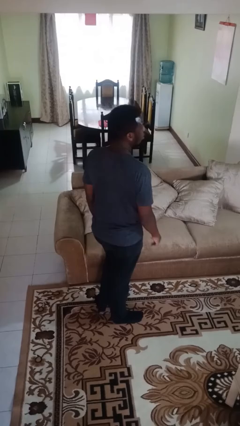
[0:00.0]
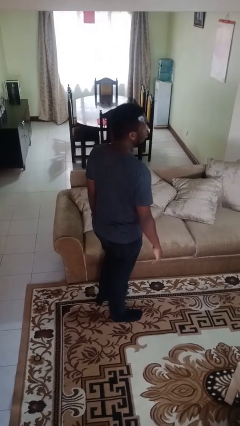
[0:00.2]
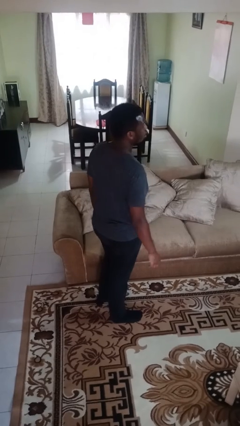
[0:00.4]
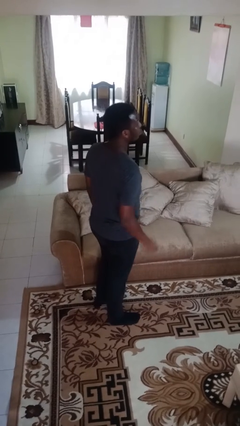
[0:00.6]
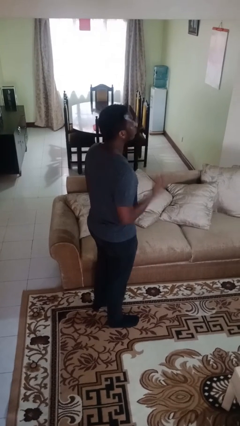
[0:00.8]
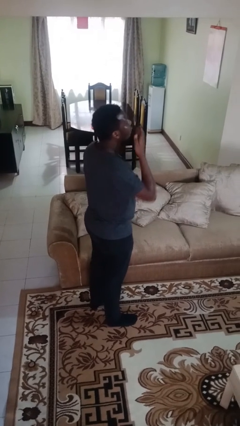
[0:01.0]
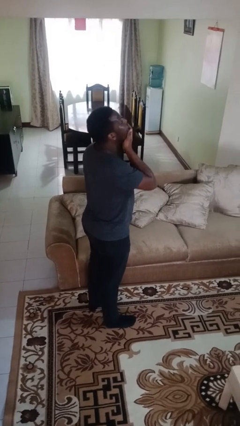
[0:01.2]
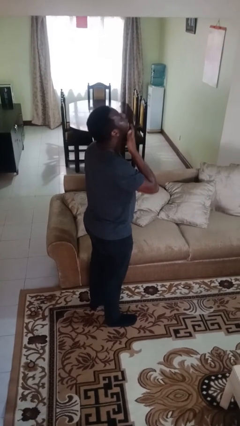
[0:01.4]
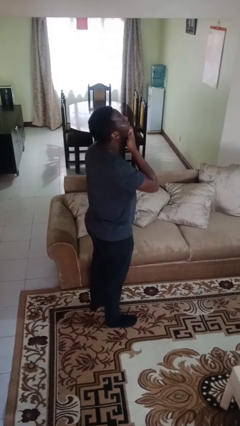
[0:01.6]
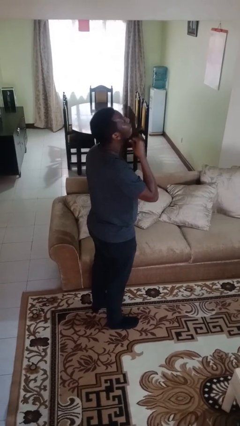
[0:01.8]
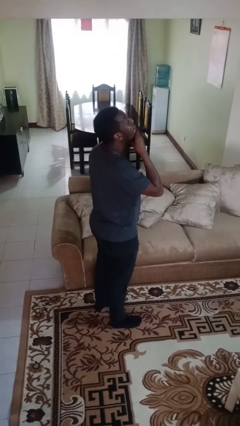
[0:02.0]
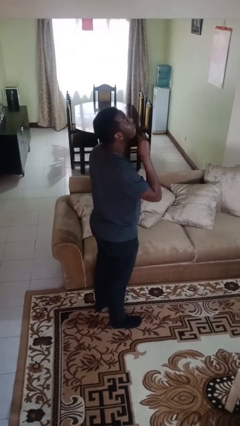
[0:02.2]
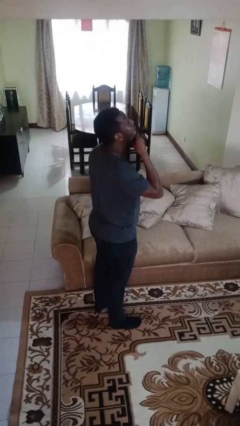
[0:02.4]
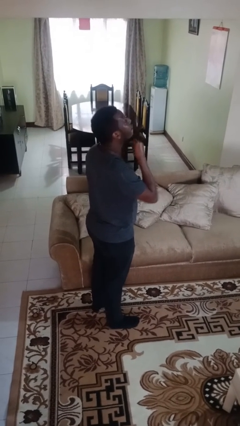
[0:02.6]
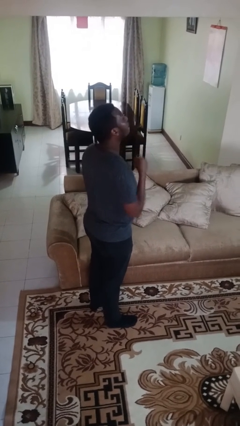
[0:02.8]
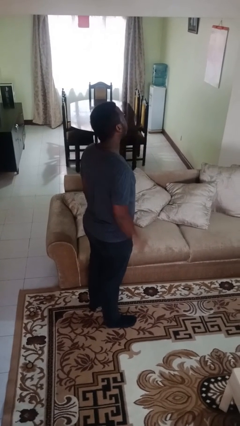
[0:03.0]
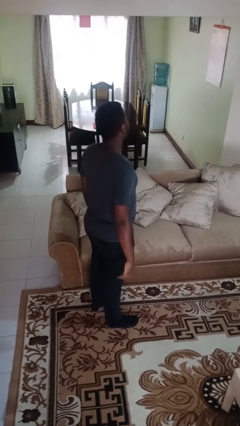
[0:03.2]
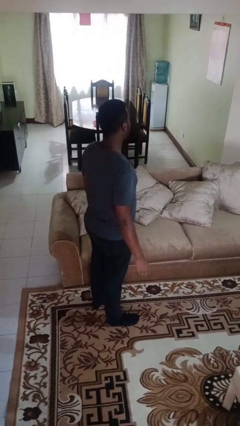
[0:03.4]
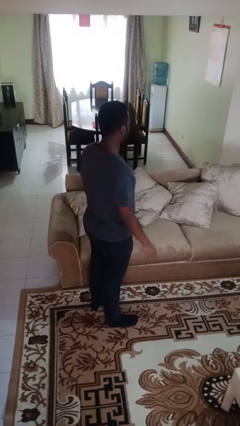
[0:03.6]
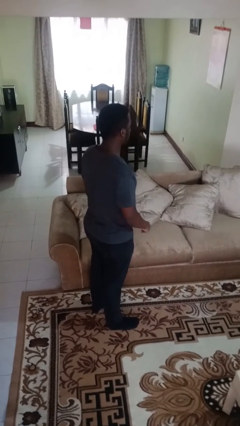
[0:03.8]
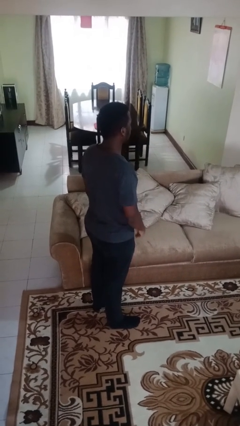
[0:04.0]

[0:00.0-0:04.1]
person strokes chin

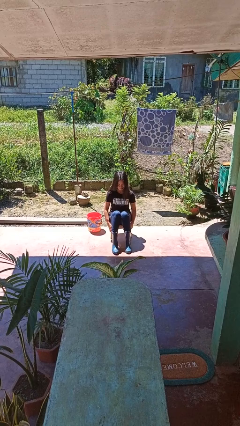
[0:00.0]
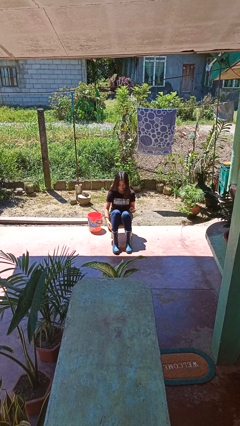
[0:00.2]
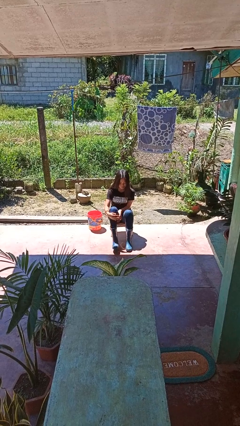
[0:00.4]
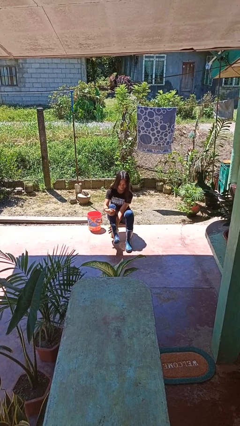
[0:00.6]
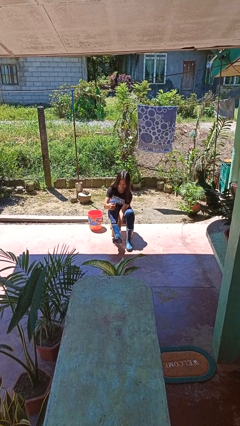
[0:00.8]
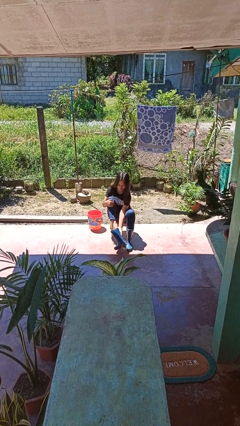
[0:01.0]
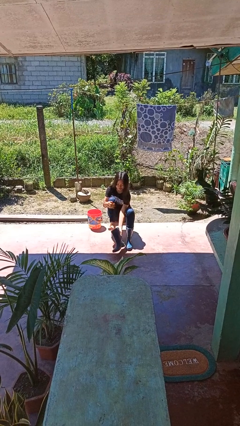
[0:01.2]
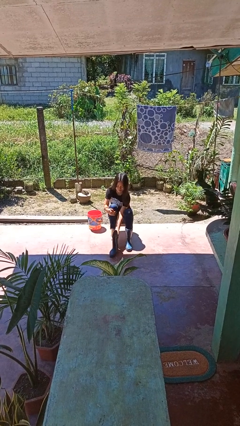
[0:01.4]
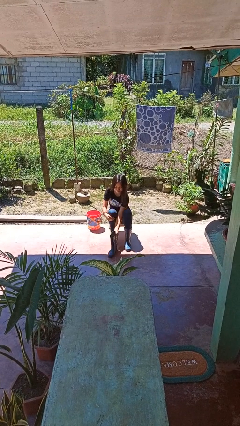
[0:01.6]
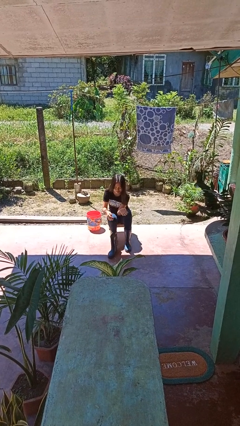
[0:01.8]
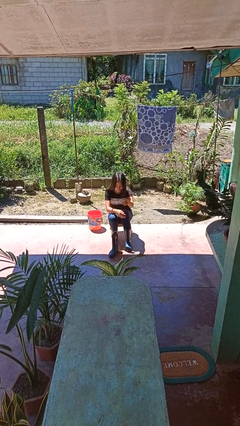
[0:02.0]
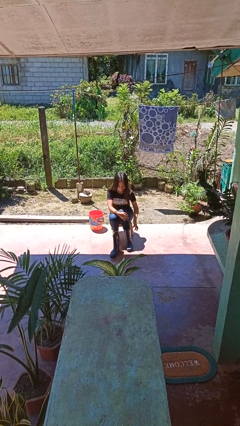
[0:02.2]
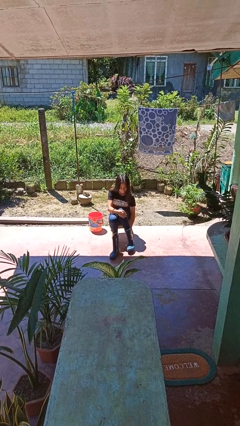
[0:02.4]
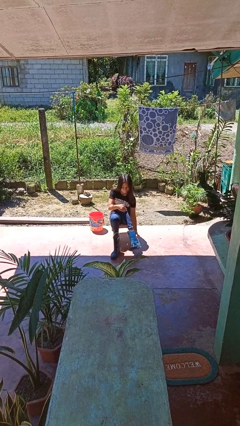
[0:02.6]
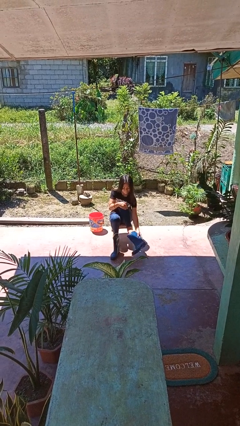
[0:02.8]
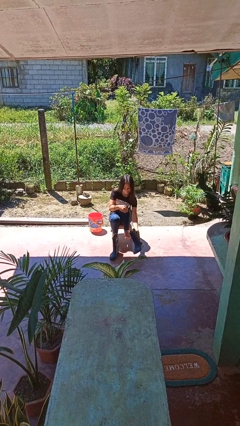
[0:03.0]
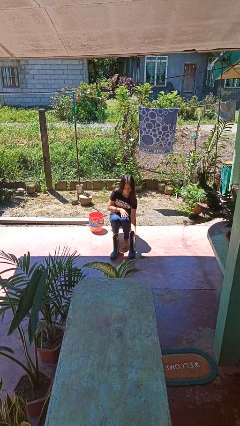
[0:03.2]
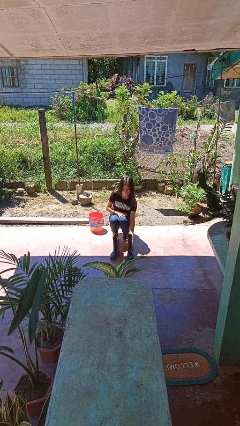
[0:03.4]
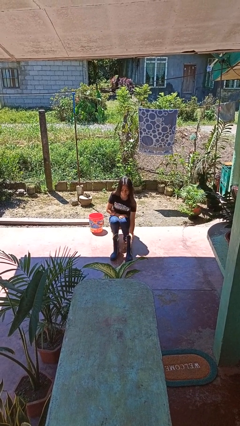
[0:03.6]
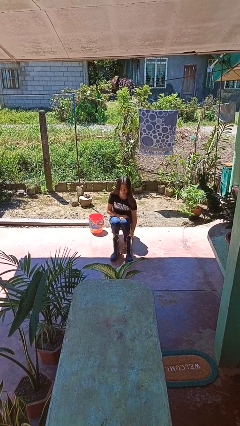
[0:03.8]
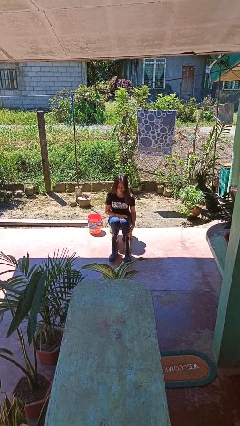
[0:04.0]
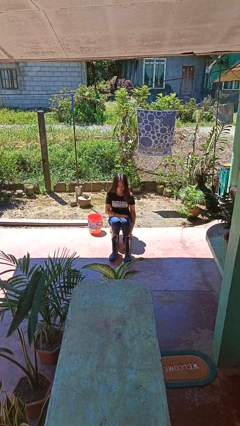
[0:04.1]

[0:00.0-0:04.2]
person takes off boots

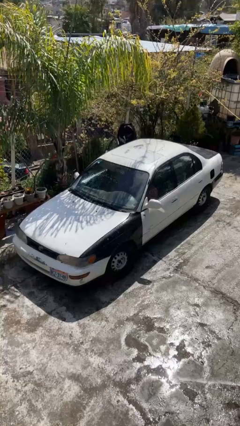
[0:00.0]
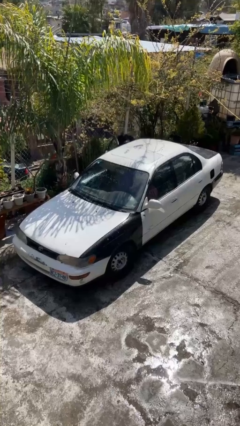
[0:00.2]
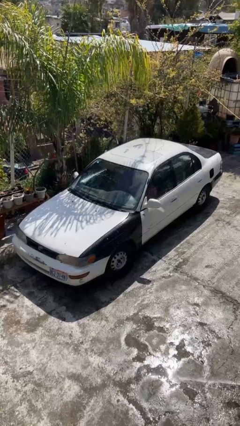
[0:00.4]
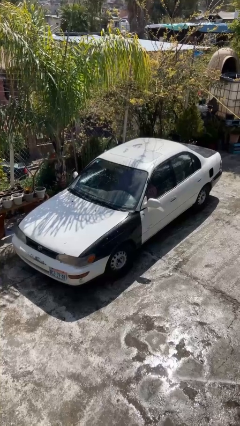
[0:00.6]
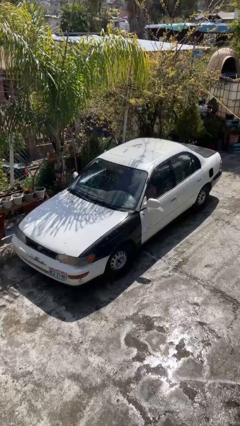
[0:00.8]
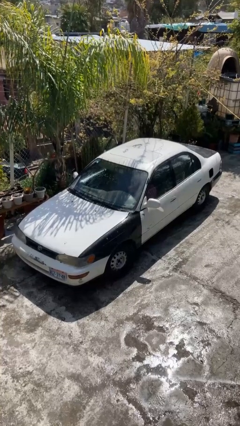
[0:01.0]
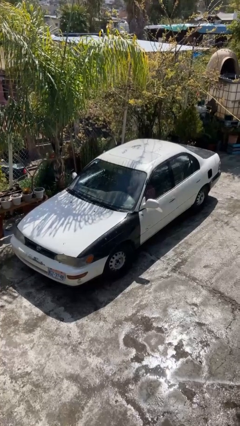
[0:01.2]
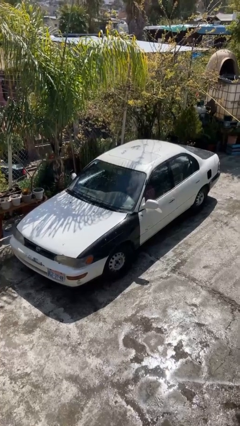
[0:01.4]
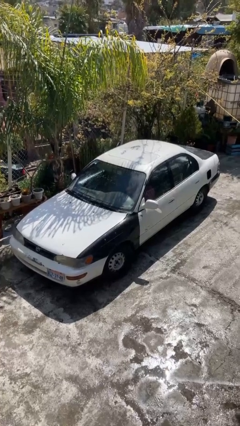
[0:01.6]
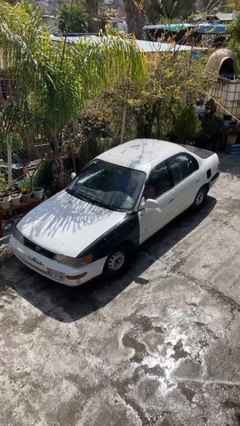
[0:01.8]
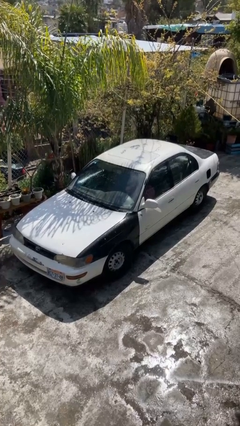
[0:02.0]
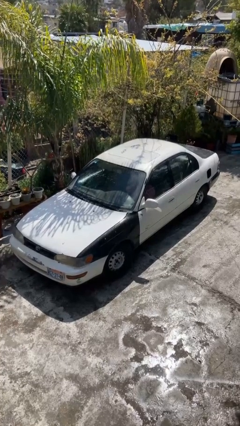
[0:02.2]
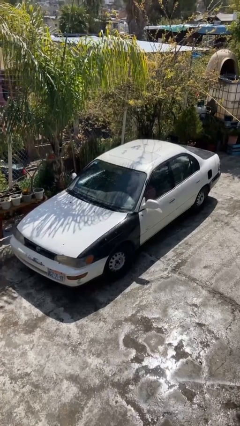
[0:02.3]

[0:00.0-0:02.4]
car picks up person

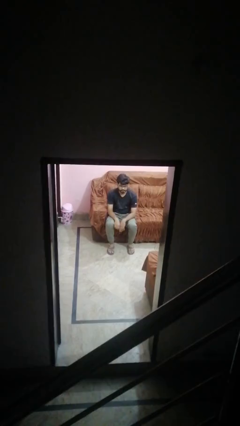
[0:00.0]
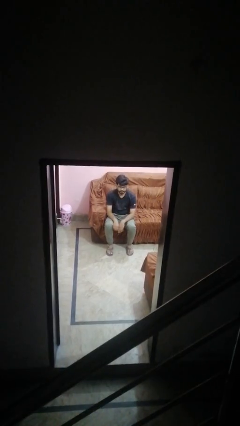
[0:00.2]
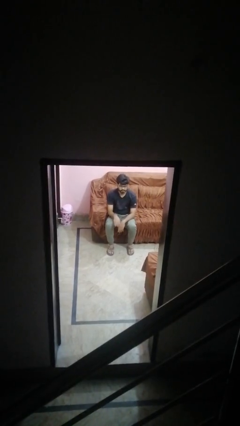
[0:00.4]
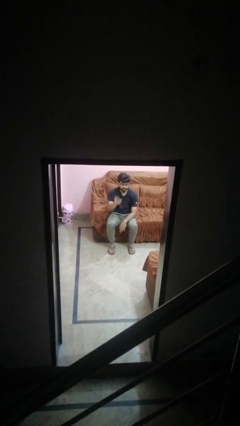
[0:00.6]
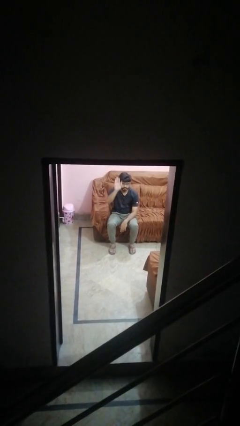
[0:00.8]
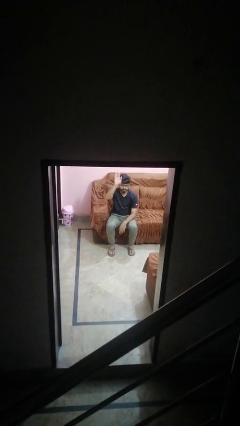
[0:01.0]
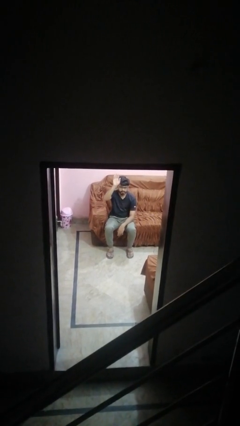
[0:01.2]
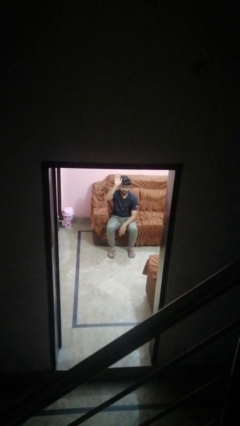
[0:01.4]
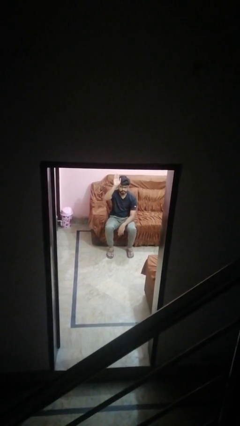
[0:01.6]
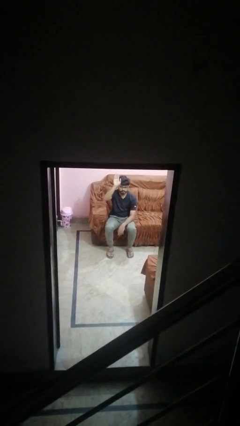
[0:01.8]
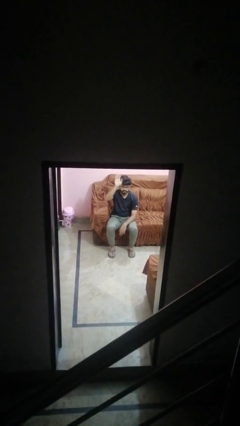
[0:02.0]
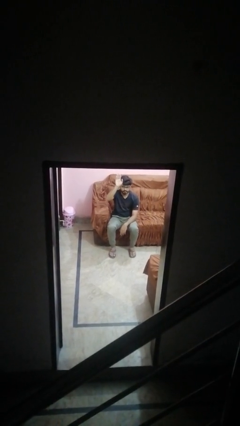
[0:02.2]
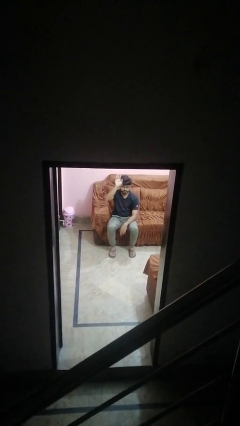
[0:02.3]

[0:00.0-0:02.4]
person gestures raise hand

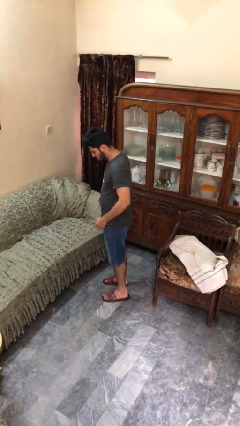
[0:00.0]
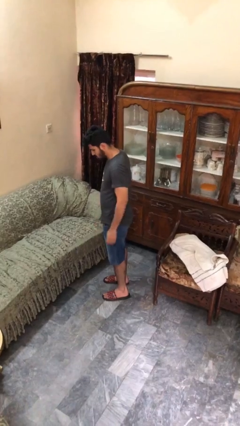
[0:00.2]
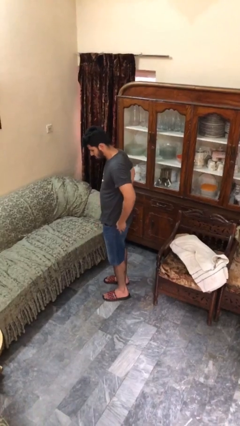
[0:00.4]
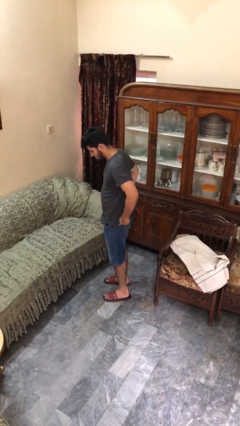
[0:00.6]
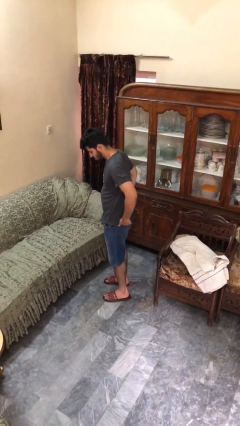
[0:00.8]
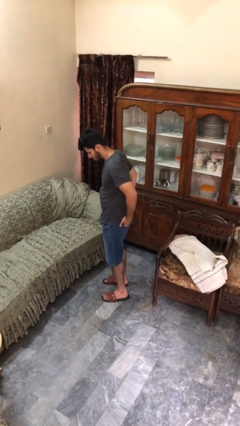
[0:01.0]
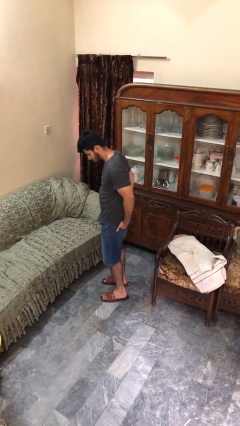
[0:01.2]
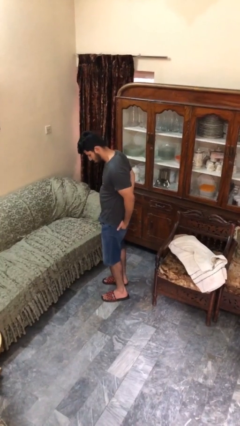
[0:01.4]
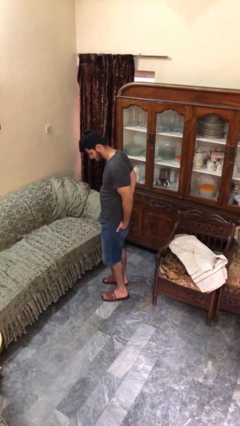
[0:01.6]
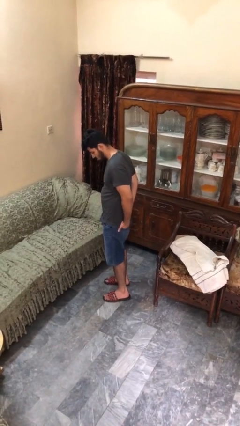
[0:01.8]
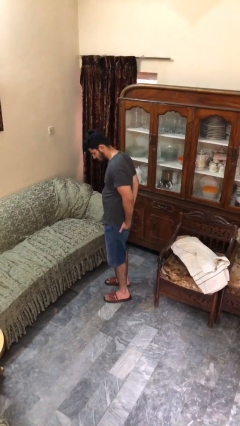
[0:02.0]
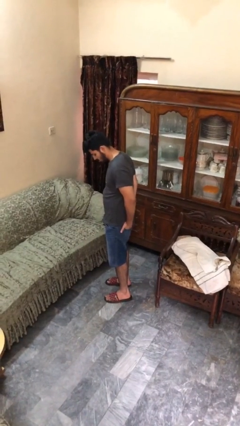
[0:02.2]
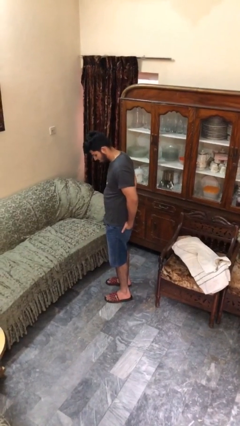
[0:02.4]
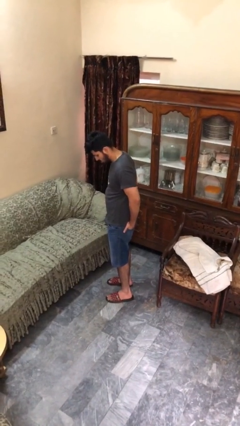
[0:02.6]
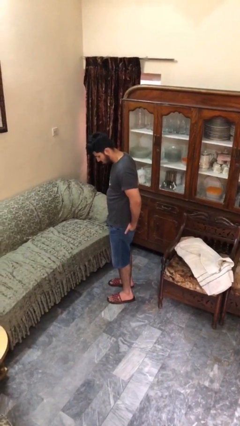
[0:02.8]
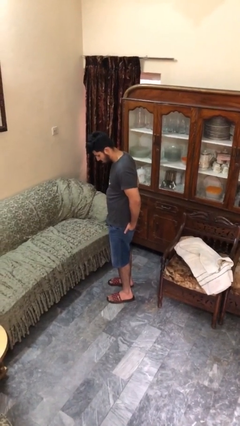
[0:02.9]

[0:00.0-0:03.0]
person puts hands in back pockets

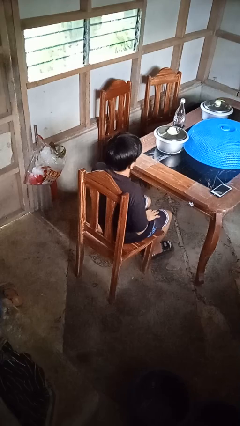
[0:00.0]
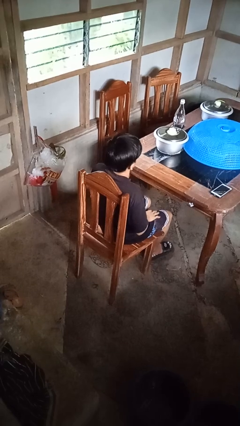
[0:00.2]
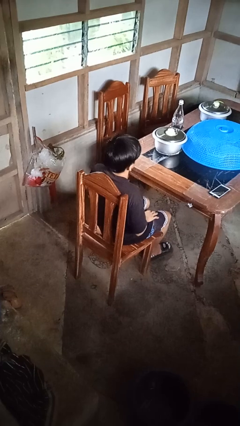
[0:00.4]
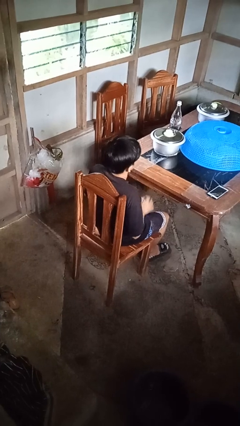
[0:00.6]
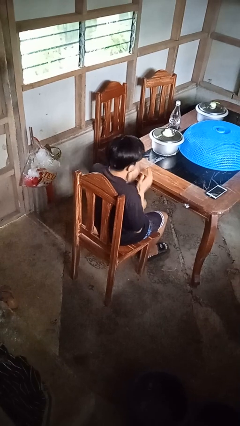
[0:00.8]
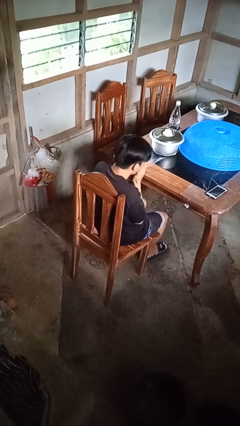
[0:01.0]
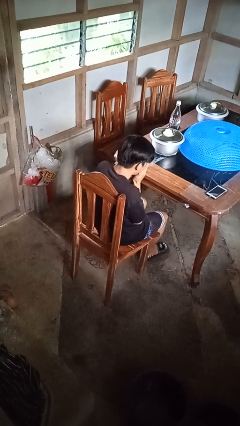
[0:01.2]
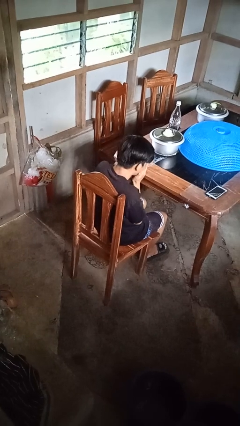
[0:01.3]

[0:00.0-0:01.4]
person sneezes into hand
